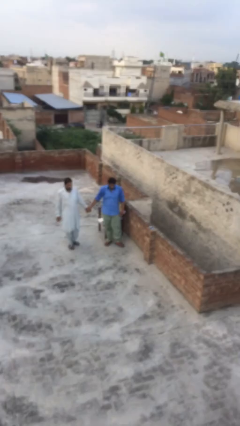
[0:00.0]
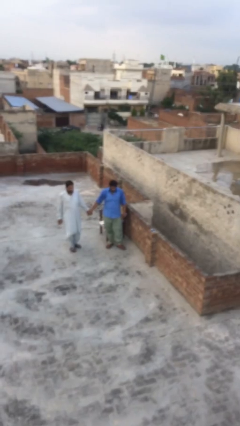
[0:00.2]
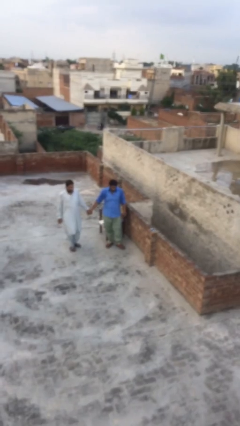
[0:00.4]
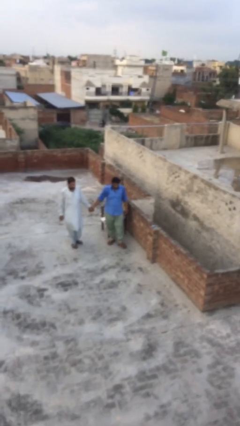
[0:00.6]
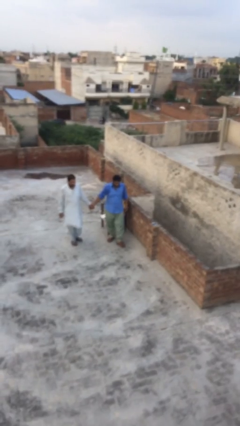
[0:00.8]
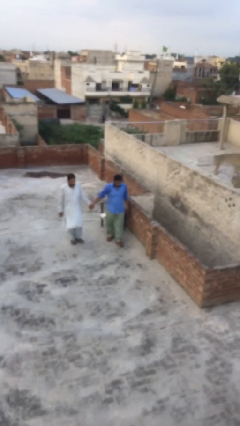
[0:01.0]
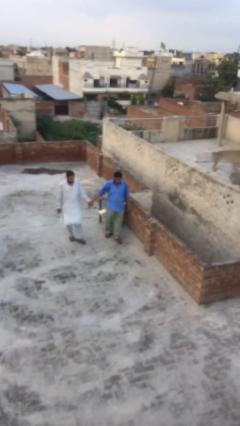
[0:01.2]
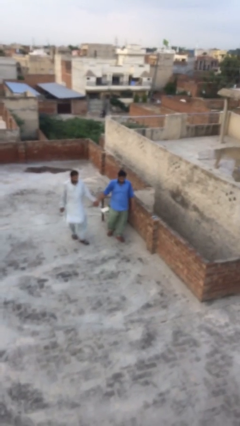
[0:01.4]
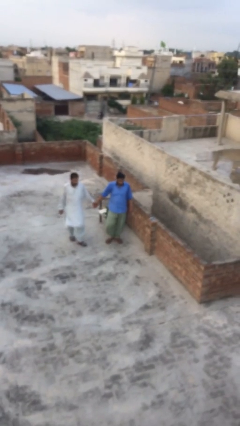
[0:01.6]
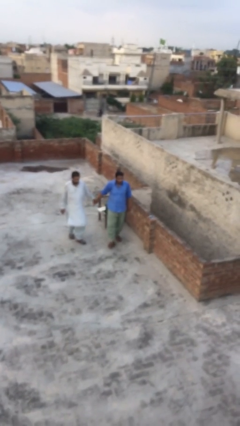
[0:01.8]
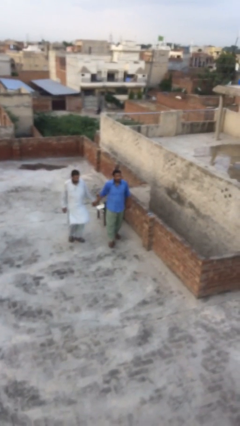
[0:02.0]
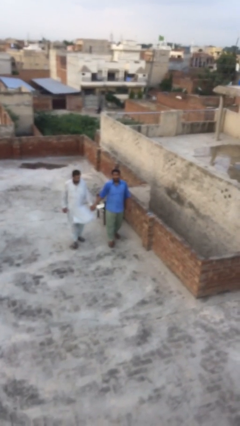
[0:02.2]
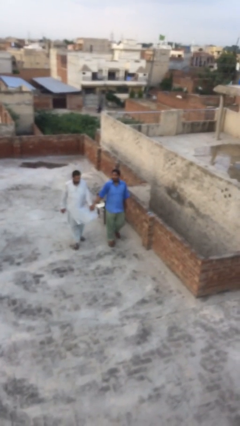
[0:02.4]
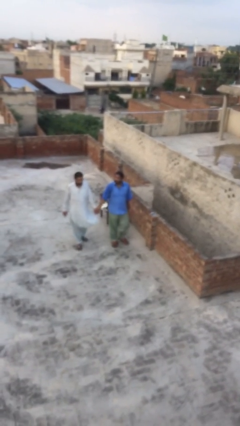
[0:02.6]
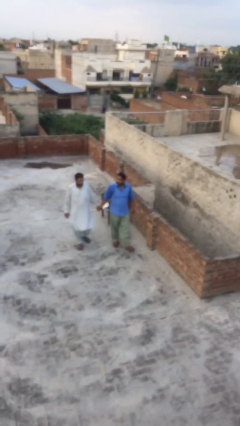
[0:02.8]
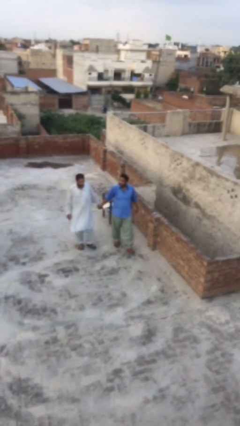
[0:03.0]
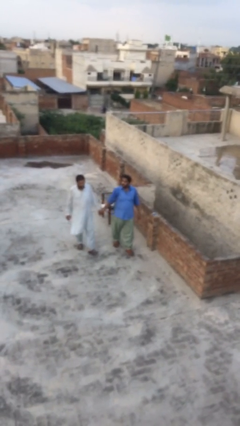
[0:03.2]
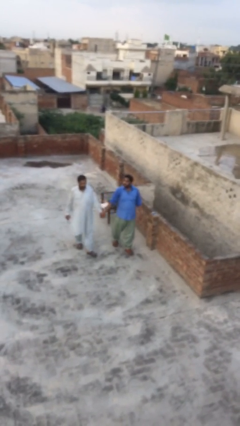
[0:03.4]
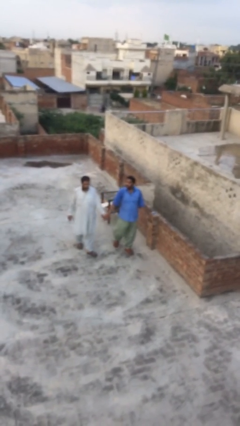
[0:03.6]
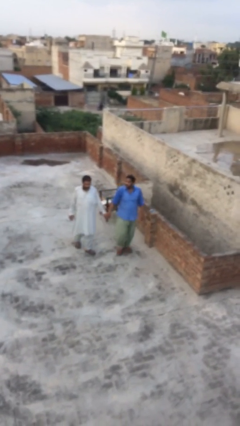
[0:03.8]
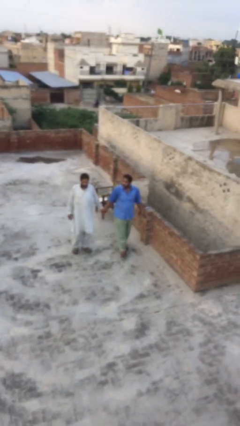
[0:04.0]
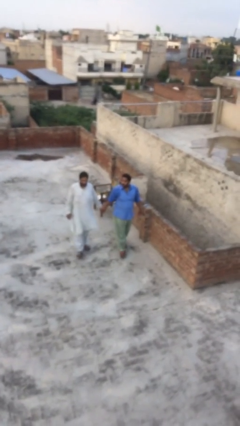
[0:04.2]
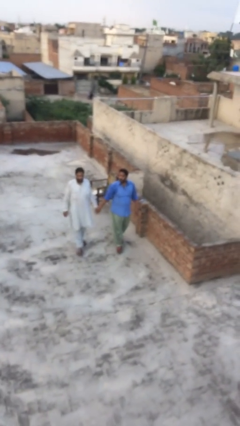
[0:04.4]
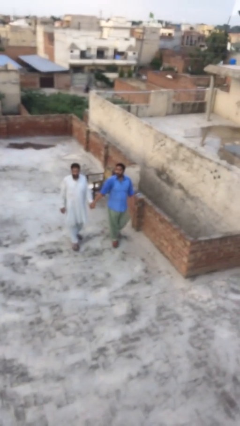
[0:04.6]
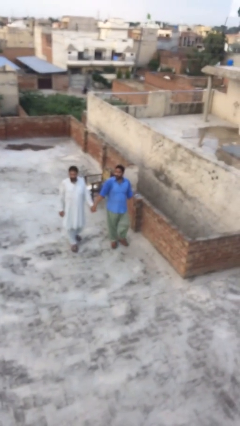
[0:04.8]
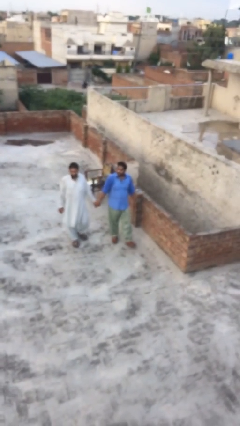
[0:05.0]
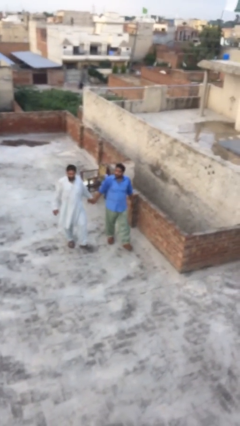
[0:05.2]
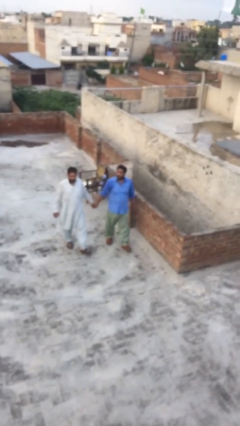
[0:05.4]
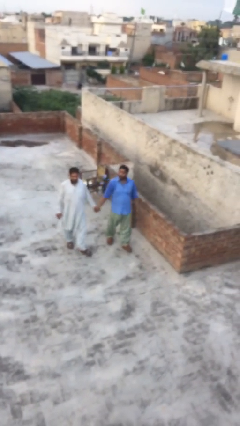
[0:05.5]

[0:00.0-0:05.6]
person holds hand

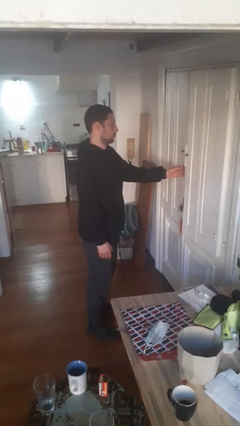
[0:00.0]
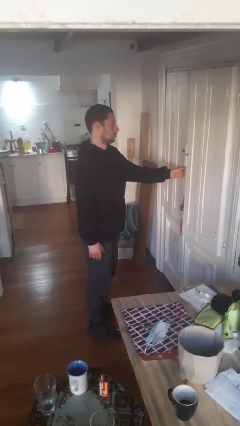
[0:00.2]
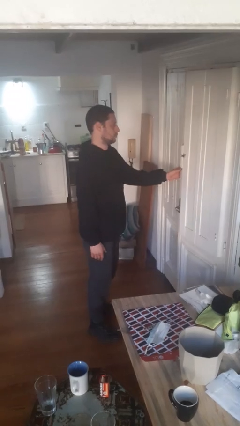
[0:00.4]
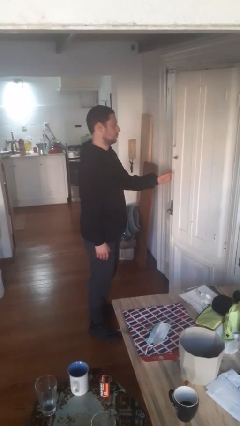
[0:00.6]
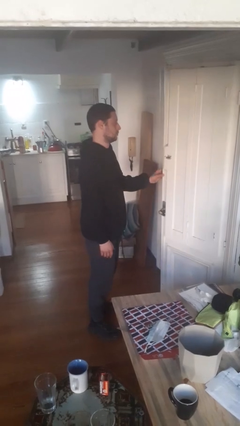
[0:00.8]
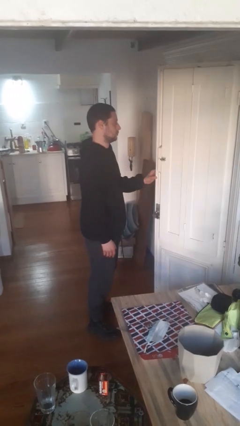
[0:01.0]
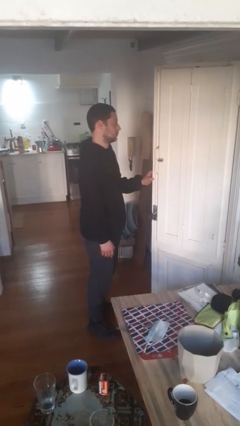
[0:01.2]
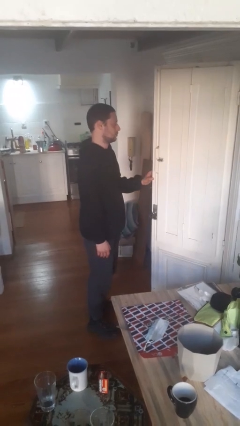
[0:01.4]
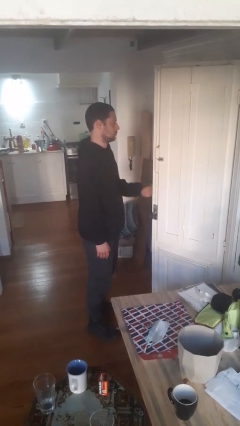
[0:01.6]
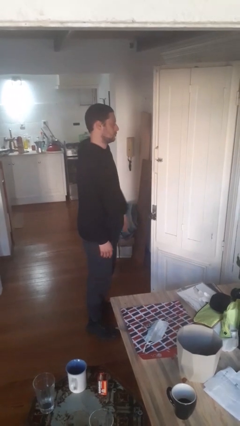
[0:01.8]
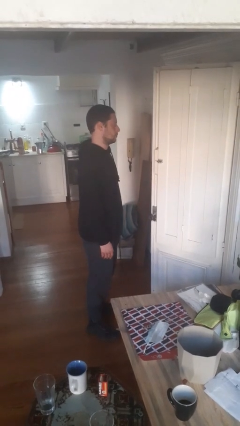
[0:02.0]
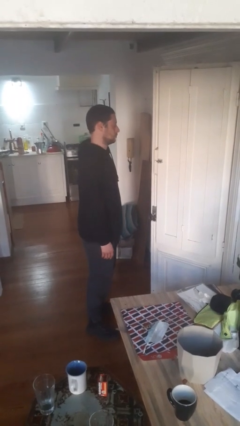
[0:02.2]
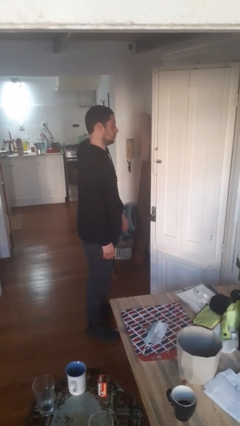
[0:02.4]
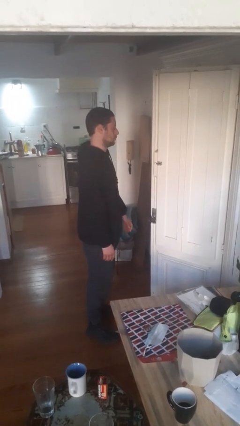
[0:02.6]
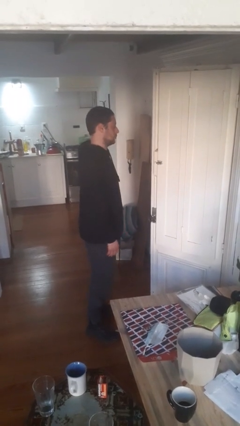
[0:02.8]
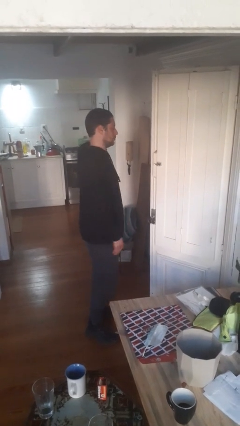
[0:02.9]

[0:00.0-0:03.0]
person opens facility door

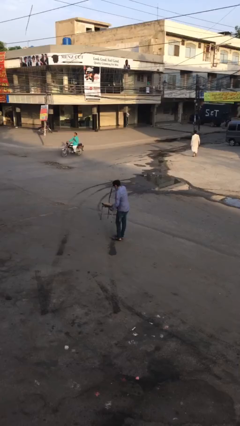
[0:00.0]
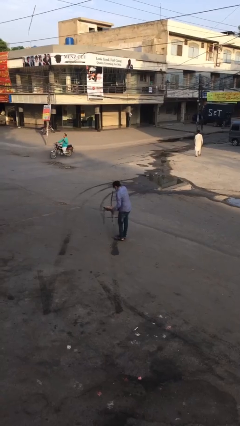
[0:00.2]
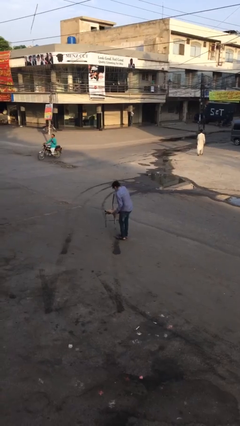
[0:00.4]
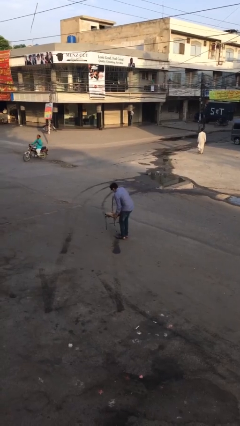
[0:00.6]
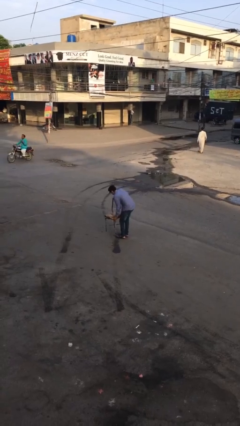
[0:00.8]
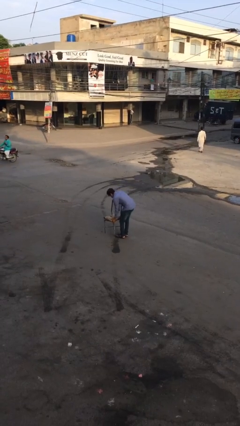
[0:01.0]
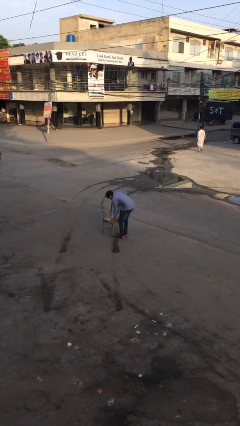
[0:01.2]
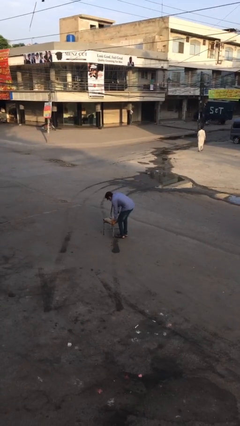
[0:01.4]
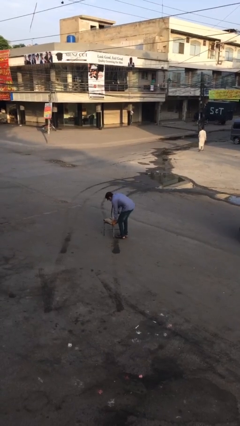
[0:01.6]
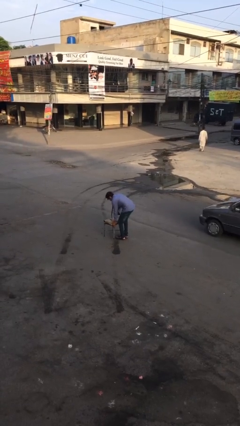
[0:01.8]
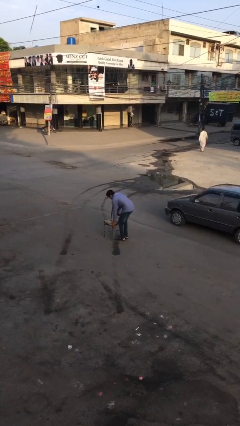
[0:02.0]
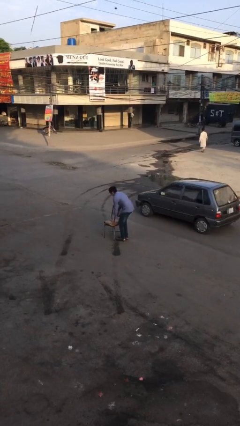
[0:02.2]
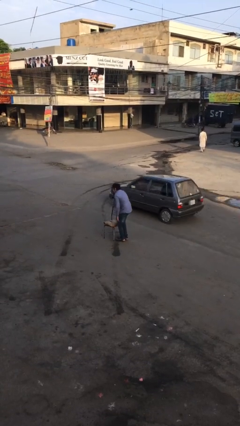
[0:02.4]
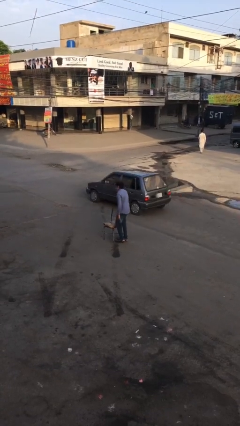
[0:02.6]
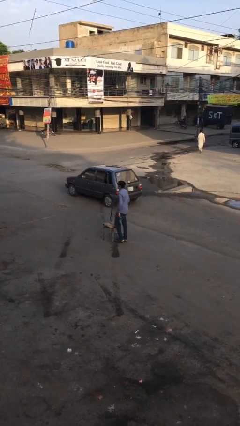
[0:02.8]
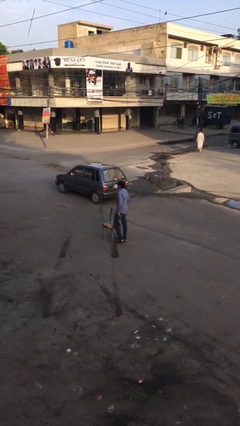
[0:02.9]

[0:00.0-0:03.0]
person puts down object on floor

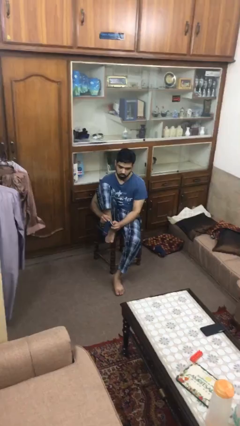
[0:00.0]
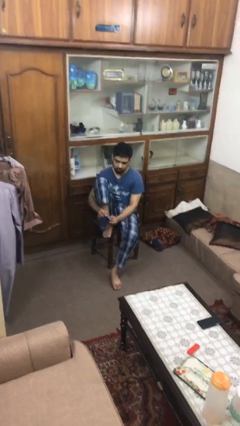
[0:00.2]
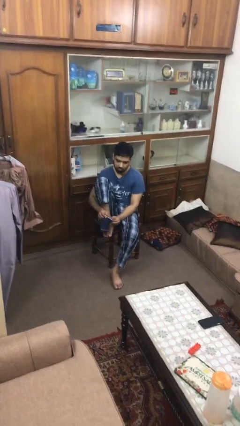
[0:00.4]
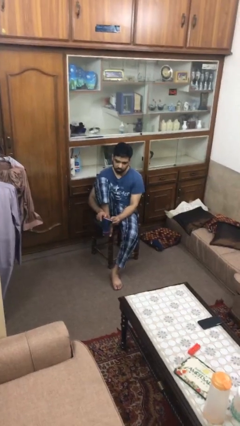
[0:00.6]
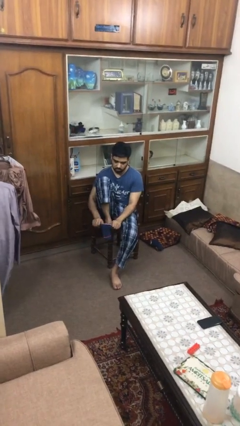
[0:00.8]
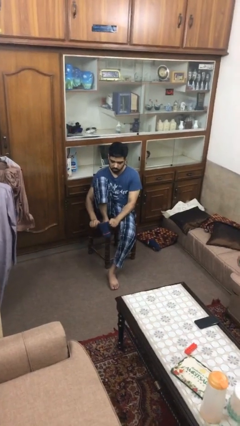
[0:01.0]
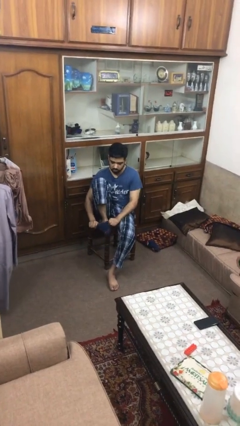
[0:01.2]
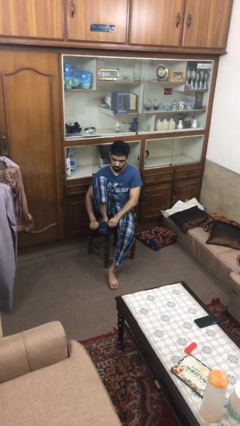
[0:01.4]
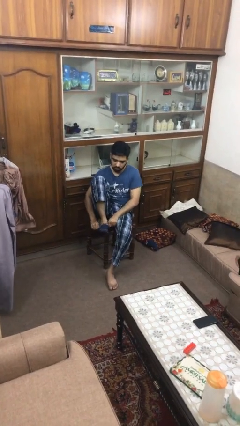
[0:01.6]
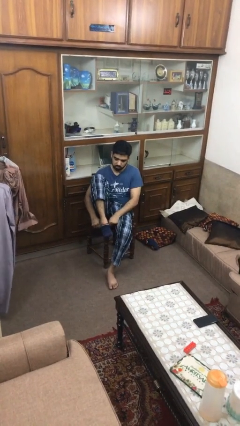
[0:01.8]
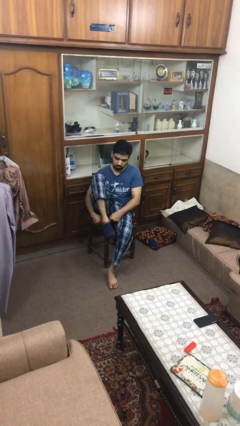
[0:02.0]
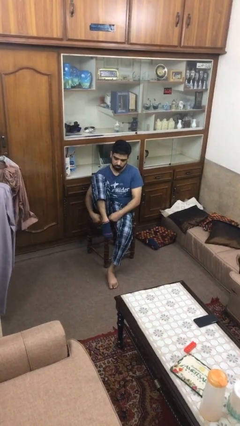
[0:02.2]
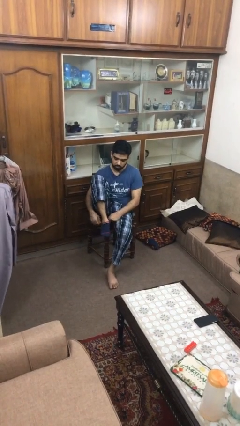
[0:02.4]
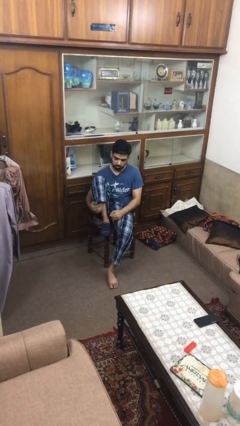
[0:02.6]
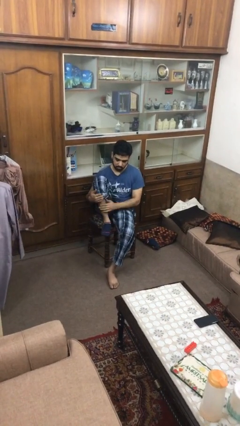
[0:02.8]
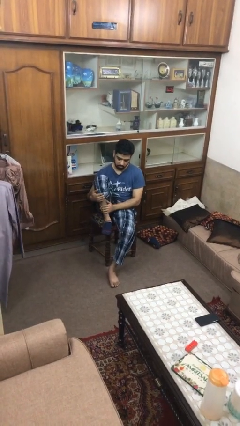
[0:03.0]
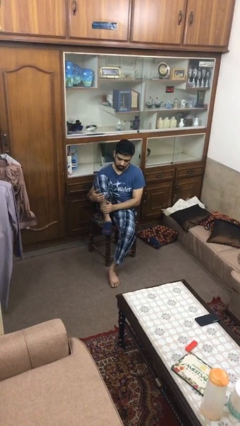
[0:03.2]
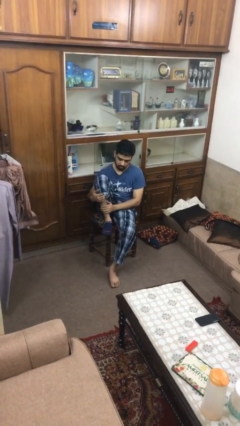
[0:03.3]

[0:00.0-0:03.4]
person puts on socks

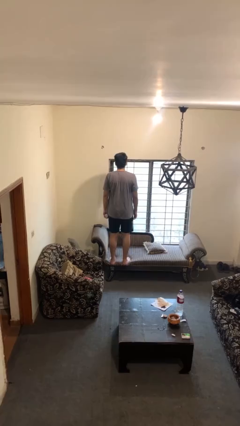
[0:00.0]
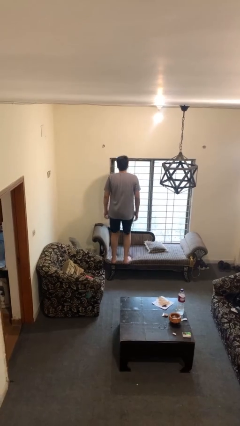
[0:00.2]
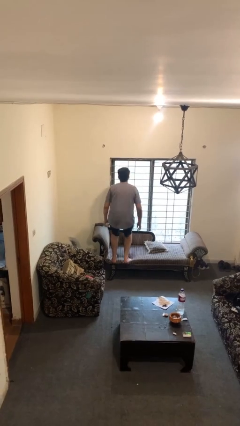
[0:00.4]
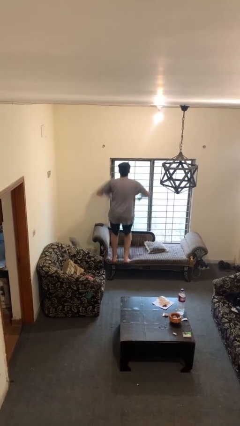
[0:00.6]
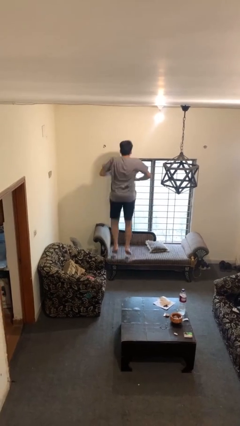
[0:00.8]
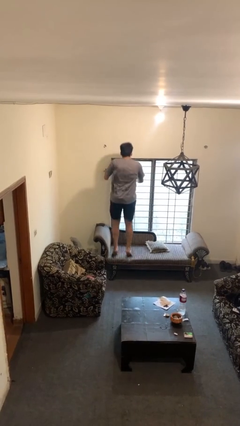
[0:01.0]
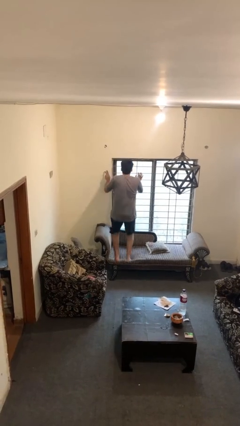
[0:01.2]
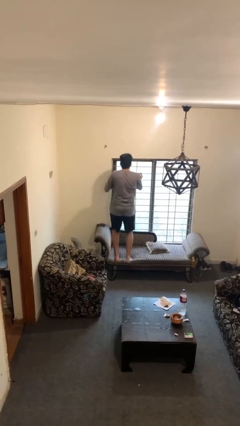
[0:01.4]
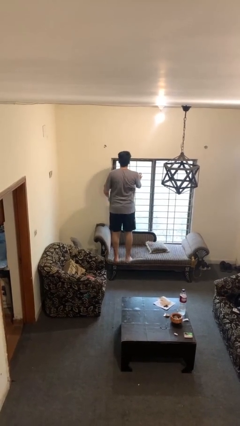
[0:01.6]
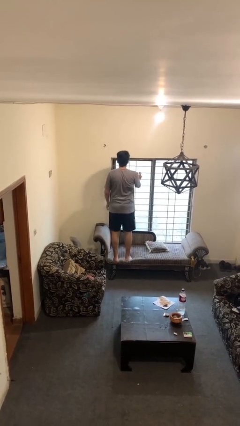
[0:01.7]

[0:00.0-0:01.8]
person jumps on couch

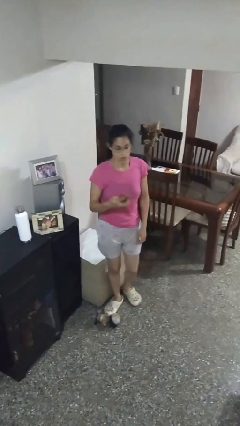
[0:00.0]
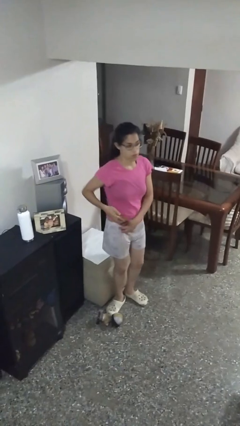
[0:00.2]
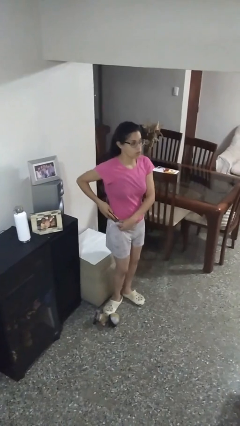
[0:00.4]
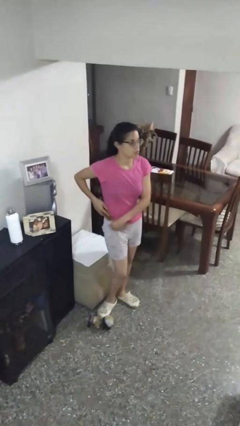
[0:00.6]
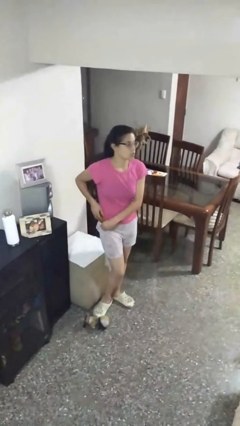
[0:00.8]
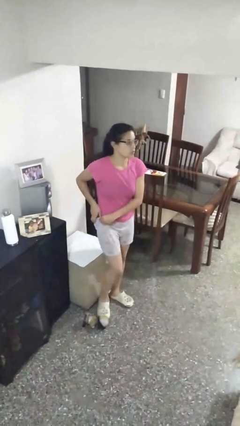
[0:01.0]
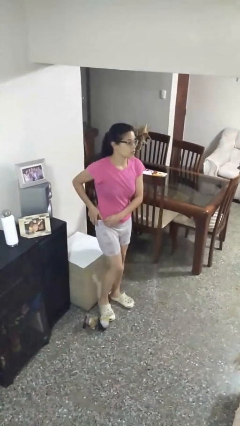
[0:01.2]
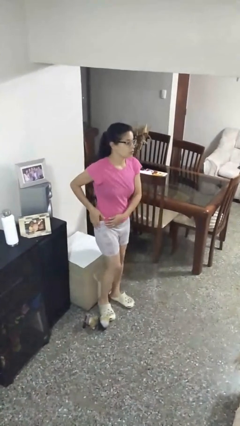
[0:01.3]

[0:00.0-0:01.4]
person puts phone into pocket
